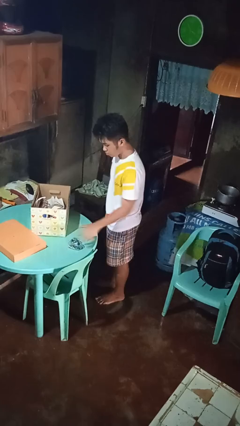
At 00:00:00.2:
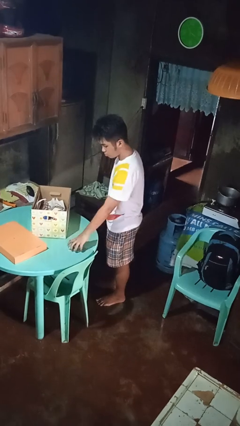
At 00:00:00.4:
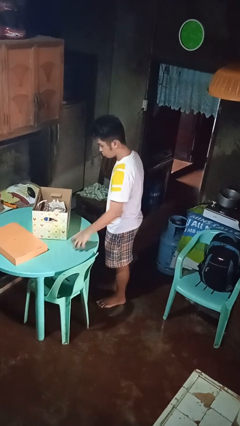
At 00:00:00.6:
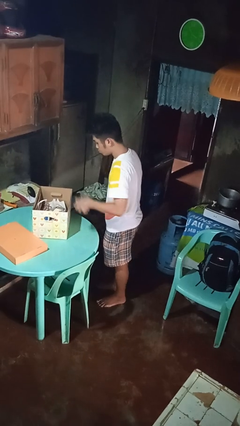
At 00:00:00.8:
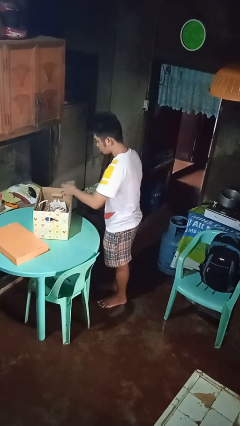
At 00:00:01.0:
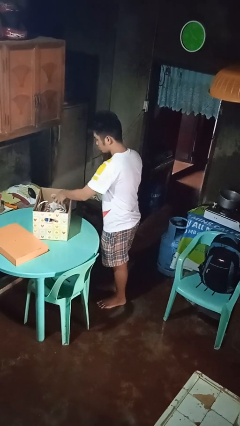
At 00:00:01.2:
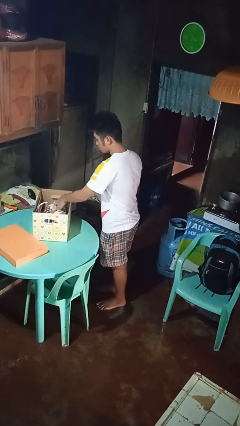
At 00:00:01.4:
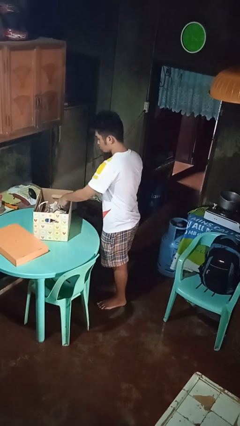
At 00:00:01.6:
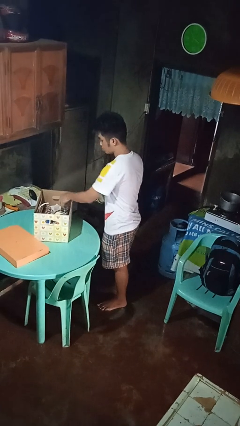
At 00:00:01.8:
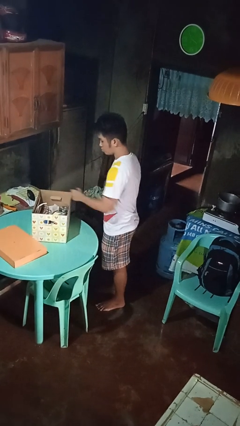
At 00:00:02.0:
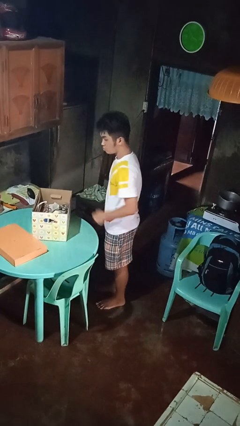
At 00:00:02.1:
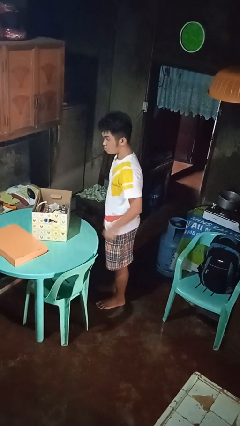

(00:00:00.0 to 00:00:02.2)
person puts object into box

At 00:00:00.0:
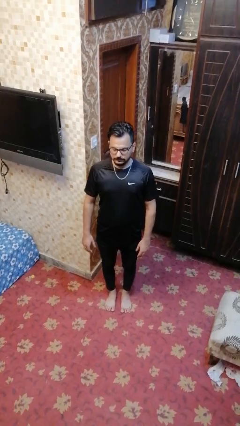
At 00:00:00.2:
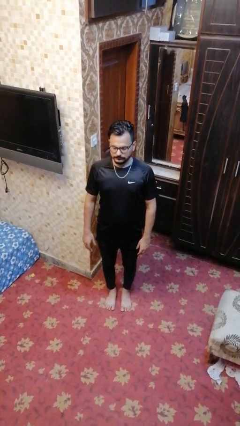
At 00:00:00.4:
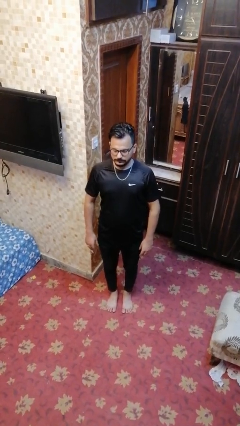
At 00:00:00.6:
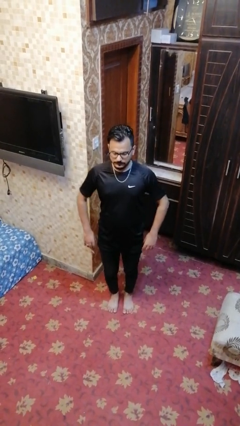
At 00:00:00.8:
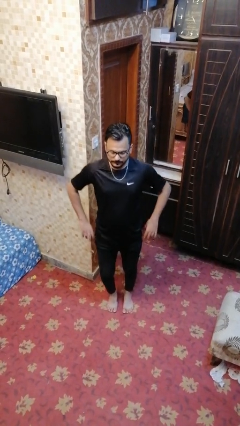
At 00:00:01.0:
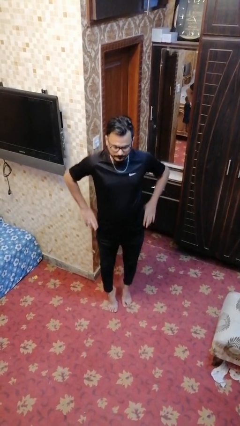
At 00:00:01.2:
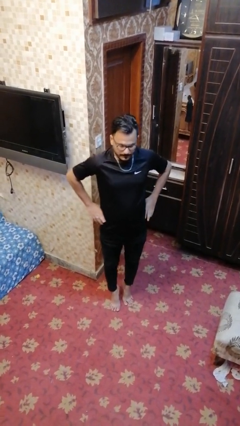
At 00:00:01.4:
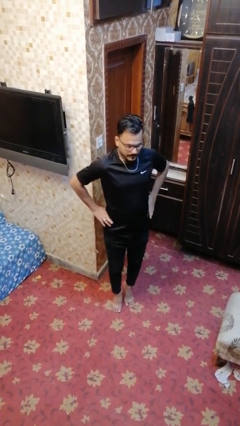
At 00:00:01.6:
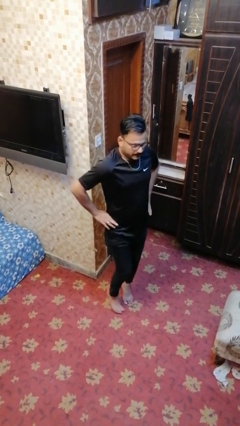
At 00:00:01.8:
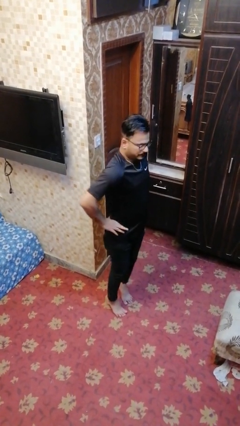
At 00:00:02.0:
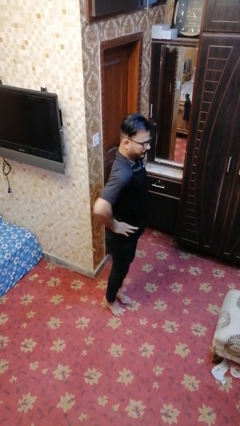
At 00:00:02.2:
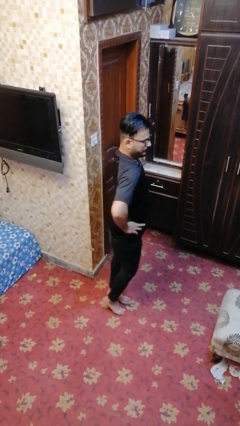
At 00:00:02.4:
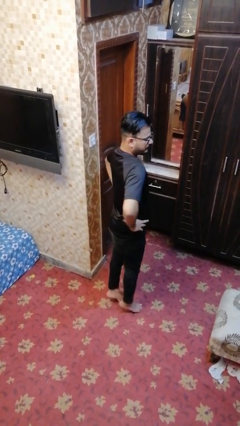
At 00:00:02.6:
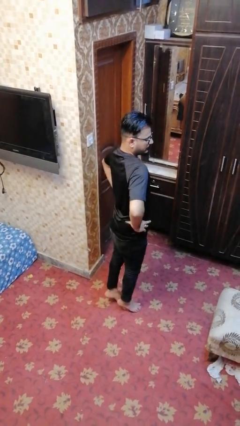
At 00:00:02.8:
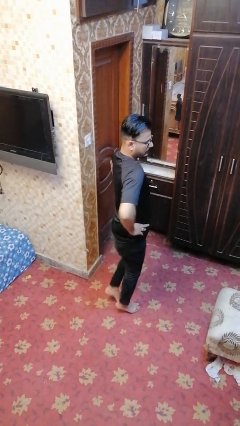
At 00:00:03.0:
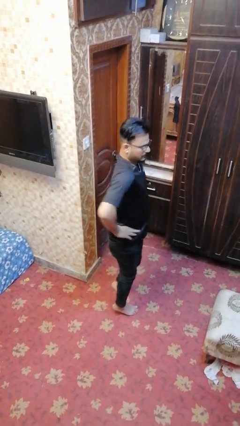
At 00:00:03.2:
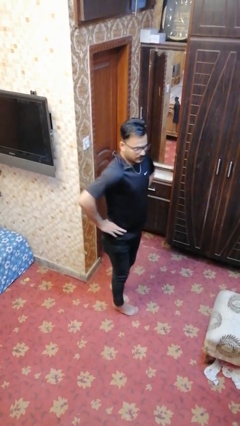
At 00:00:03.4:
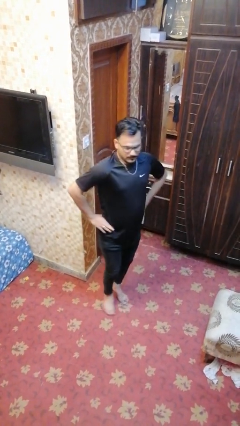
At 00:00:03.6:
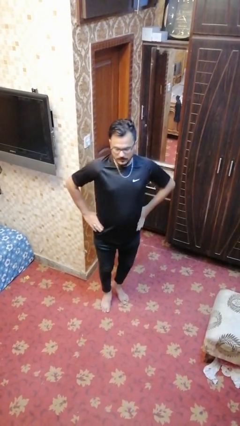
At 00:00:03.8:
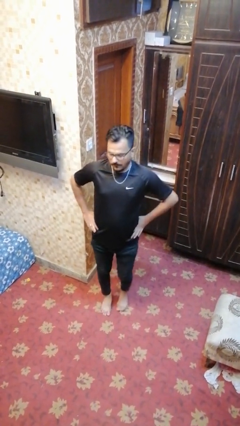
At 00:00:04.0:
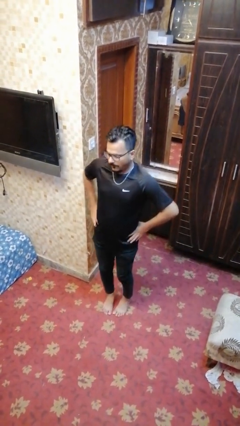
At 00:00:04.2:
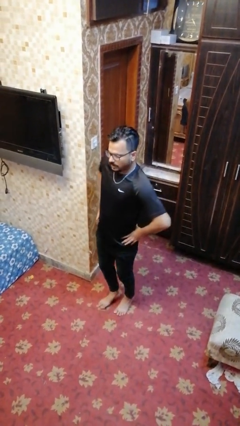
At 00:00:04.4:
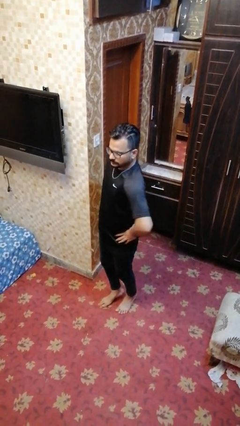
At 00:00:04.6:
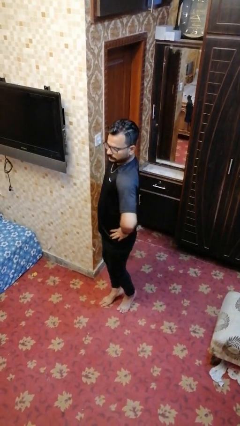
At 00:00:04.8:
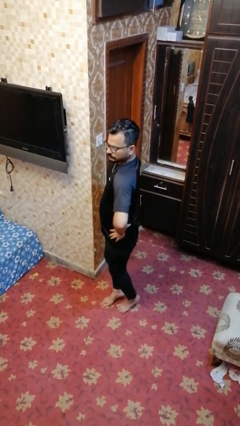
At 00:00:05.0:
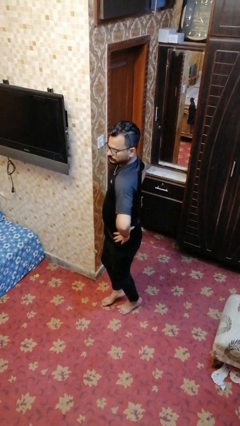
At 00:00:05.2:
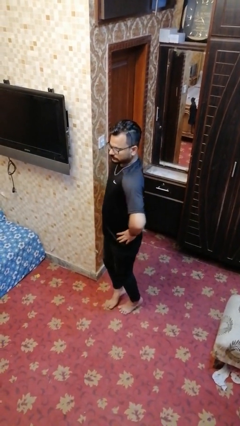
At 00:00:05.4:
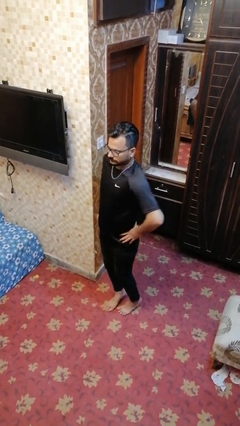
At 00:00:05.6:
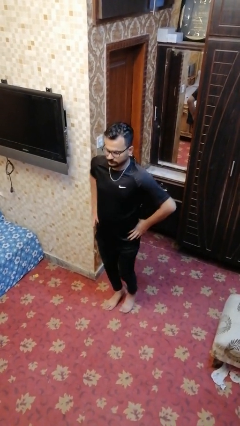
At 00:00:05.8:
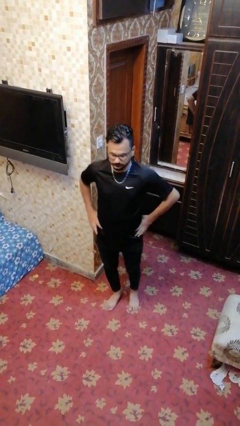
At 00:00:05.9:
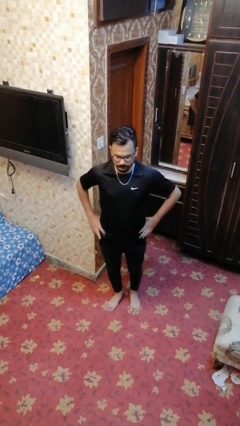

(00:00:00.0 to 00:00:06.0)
person walks tiptoe

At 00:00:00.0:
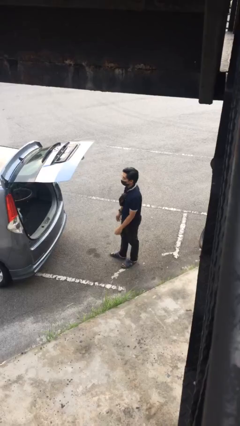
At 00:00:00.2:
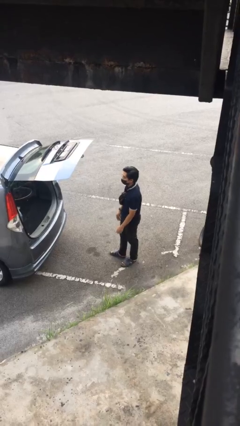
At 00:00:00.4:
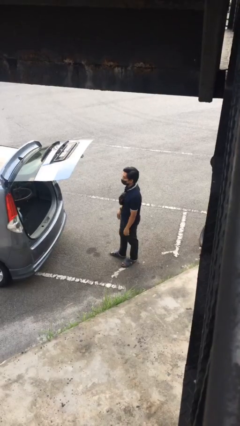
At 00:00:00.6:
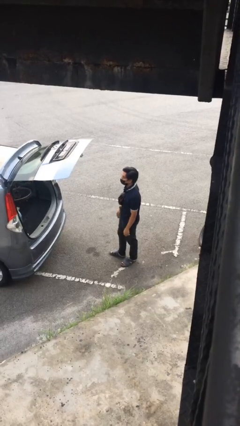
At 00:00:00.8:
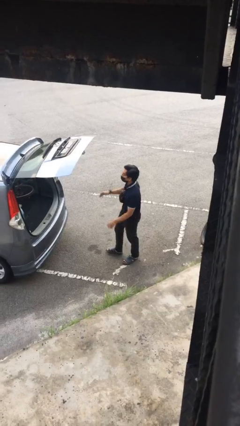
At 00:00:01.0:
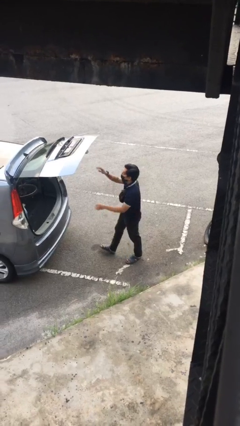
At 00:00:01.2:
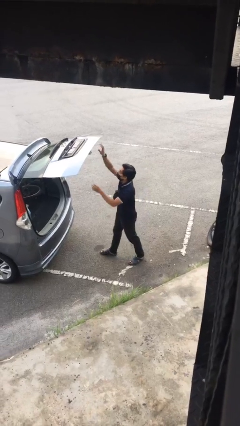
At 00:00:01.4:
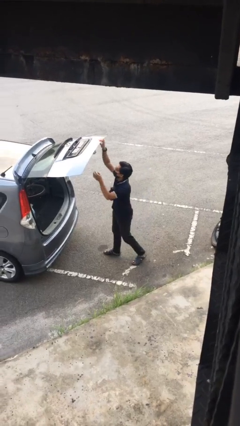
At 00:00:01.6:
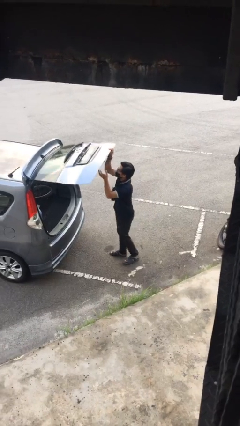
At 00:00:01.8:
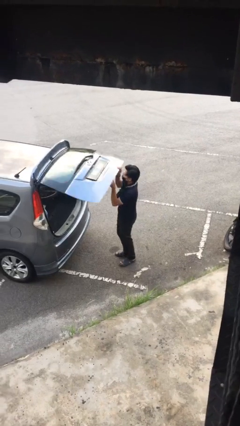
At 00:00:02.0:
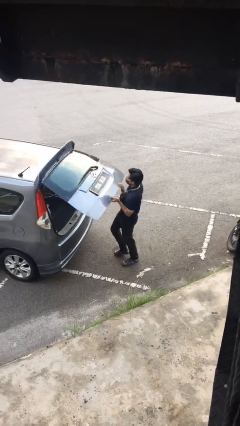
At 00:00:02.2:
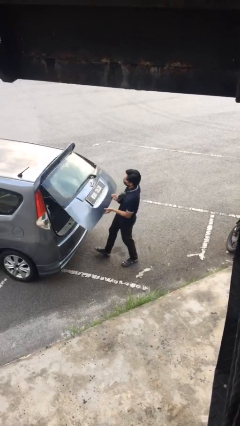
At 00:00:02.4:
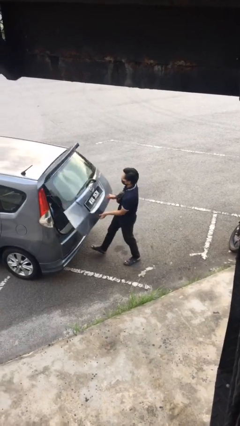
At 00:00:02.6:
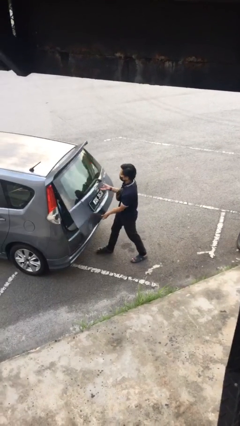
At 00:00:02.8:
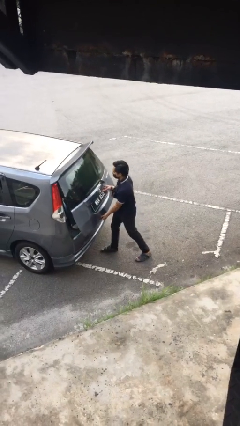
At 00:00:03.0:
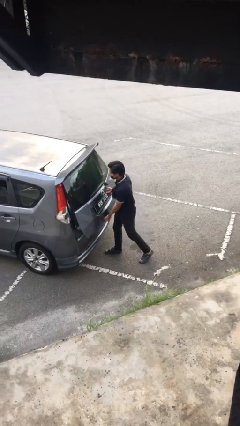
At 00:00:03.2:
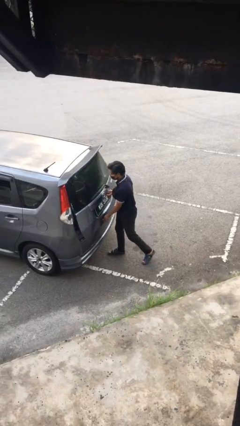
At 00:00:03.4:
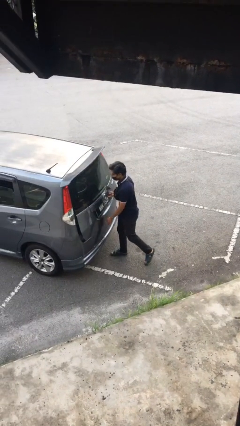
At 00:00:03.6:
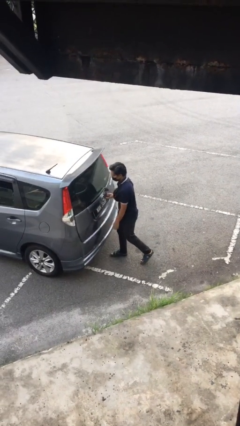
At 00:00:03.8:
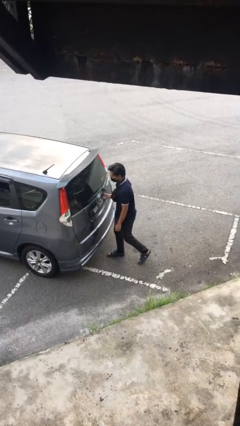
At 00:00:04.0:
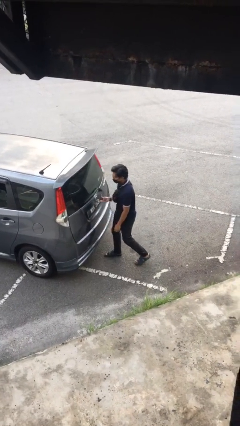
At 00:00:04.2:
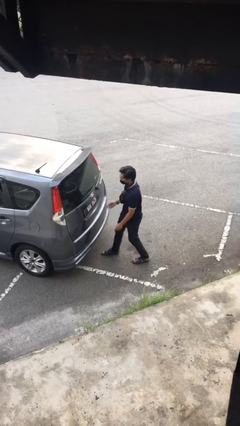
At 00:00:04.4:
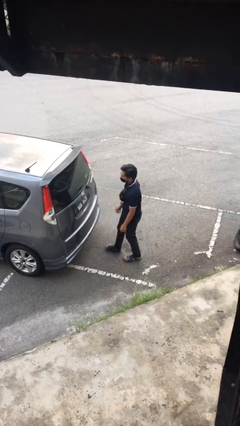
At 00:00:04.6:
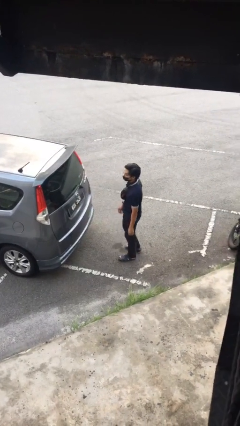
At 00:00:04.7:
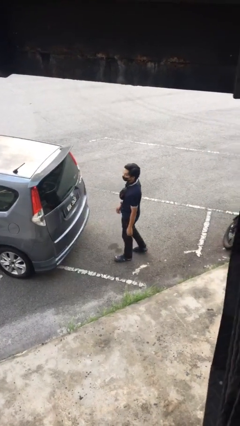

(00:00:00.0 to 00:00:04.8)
person closes car trunk

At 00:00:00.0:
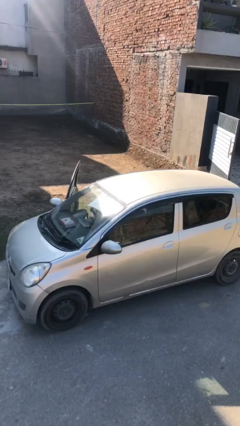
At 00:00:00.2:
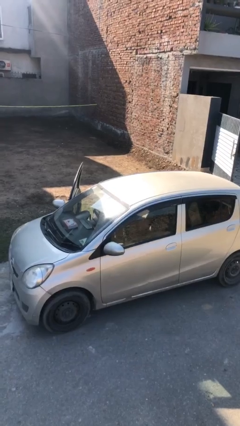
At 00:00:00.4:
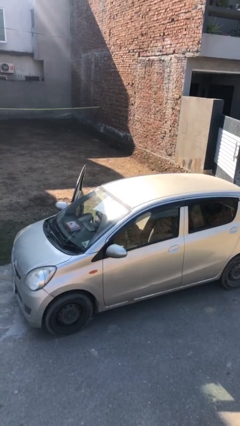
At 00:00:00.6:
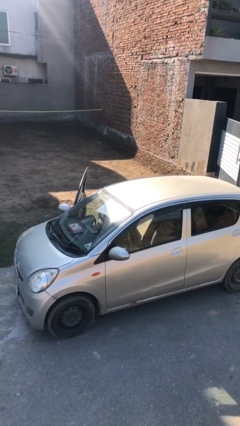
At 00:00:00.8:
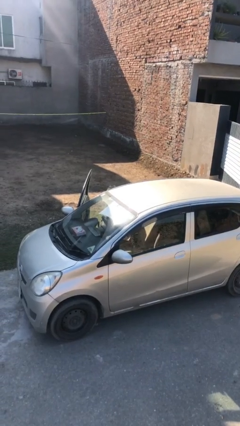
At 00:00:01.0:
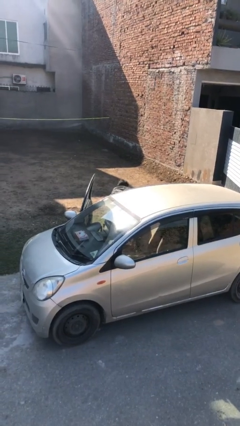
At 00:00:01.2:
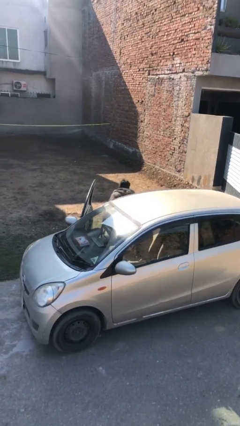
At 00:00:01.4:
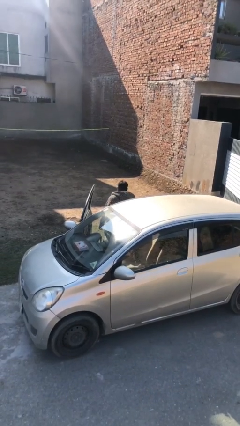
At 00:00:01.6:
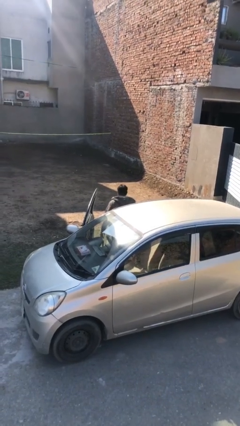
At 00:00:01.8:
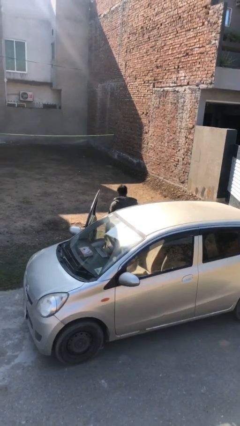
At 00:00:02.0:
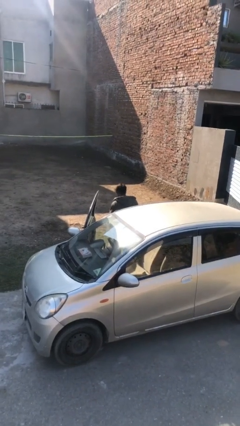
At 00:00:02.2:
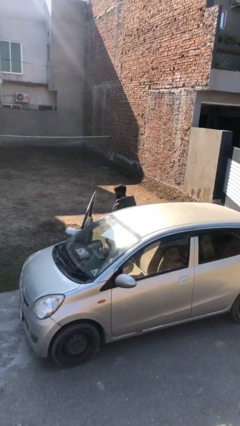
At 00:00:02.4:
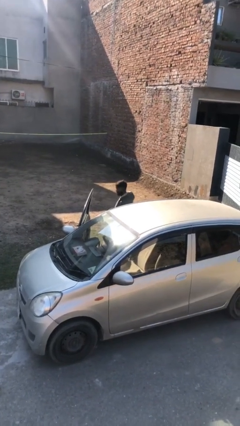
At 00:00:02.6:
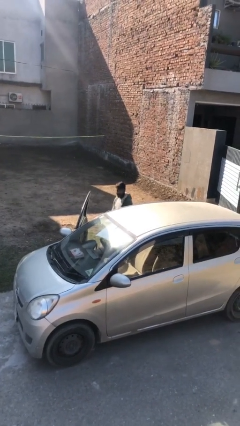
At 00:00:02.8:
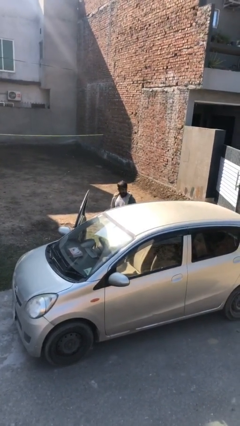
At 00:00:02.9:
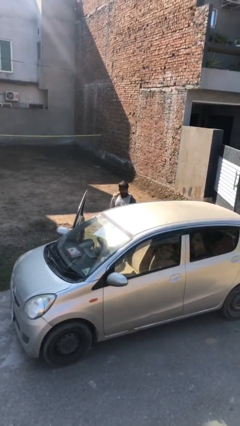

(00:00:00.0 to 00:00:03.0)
person exits car

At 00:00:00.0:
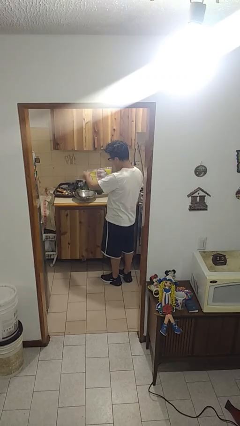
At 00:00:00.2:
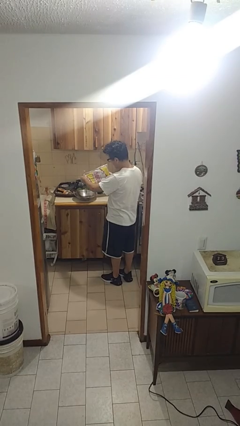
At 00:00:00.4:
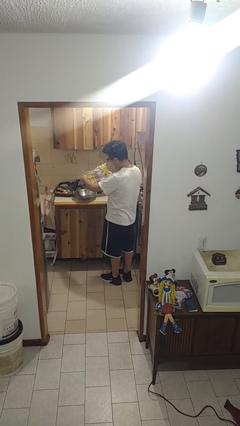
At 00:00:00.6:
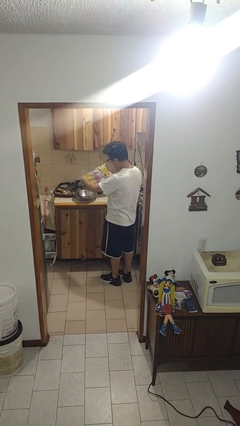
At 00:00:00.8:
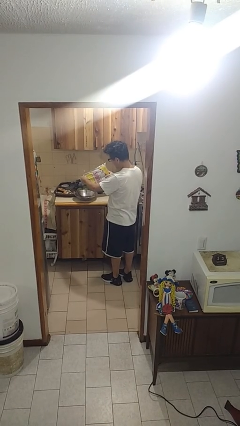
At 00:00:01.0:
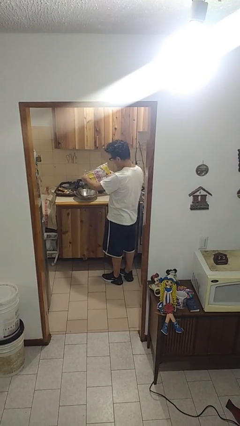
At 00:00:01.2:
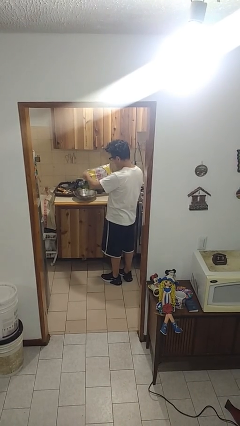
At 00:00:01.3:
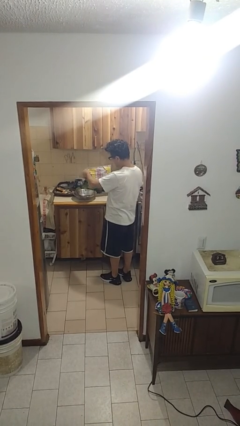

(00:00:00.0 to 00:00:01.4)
person pours into bowl
